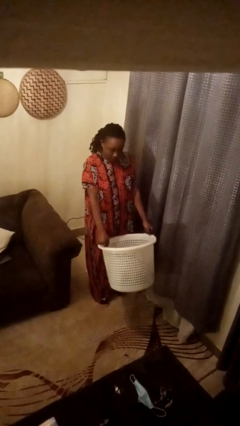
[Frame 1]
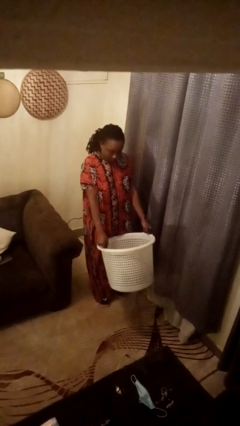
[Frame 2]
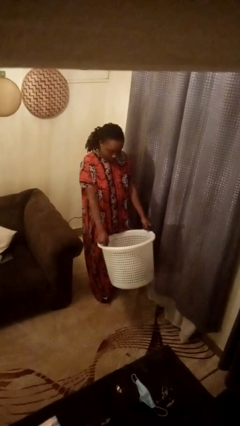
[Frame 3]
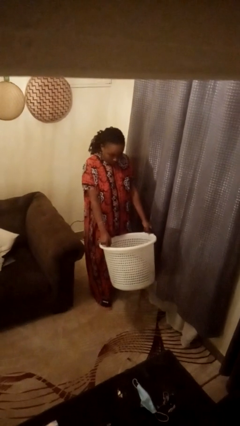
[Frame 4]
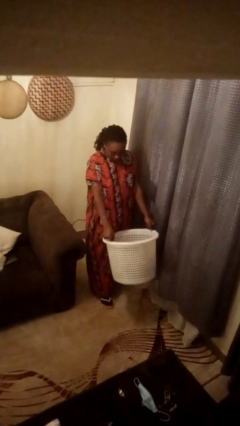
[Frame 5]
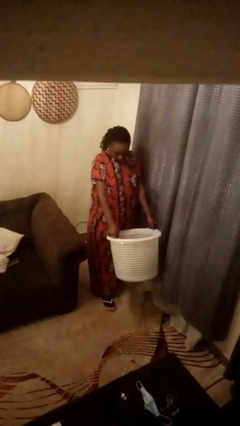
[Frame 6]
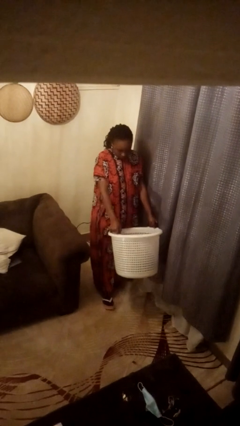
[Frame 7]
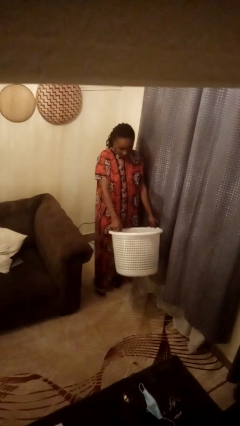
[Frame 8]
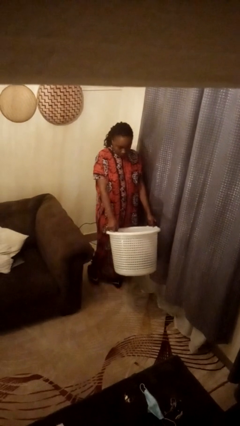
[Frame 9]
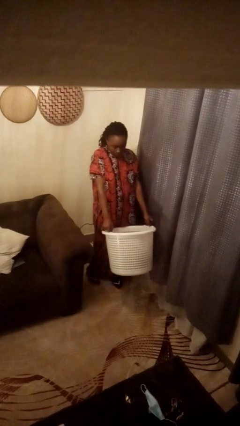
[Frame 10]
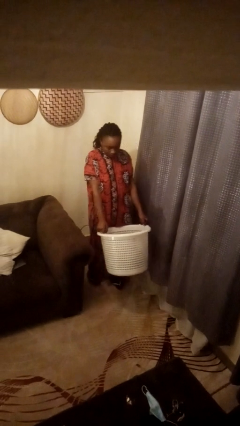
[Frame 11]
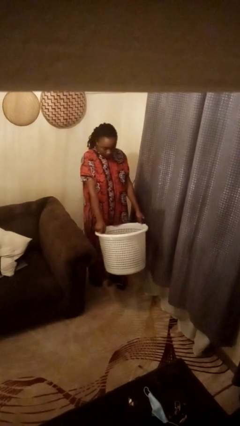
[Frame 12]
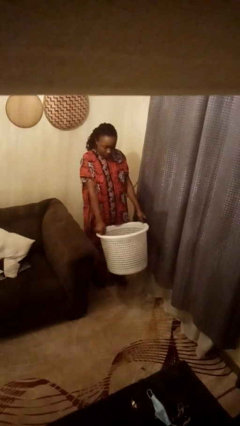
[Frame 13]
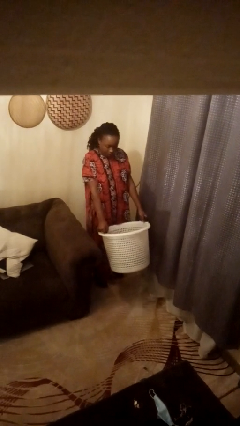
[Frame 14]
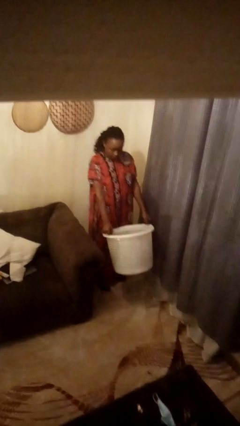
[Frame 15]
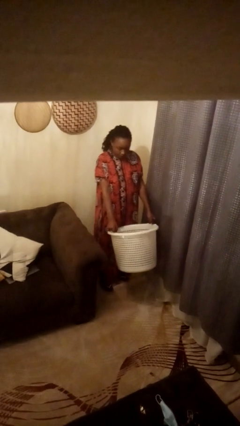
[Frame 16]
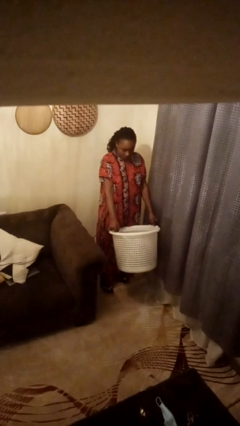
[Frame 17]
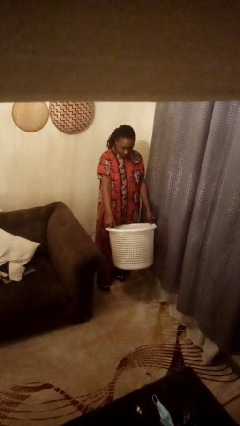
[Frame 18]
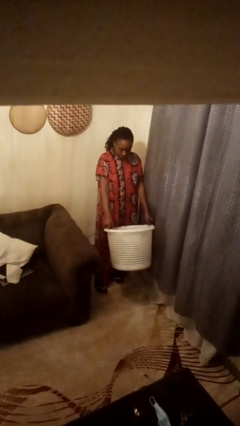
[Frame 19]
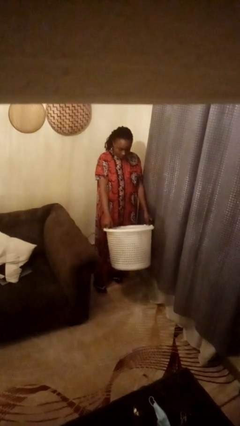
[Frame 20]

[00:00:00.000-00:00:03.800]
person carries laundry basket

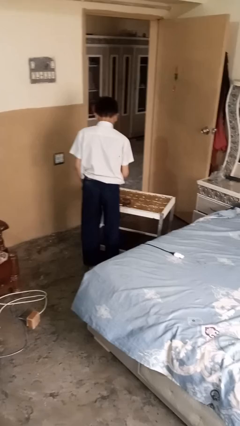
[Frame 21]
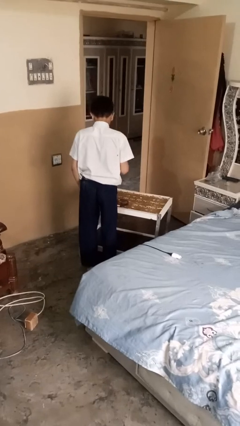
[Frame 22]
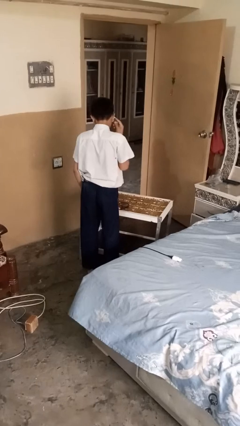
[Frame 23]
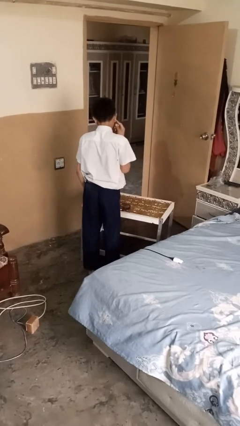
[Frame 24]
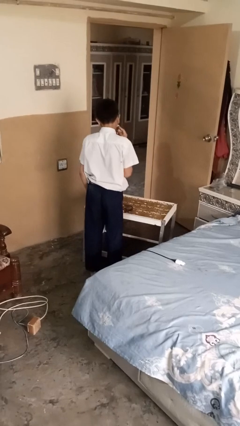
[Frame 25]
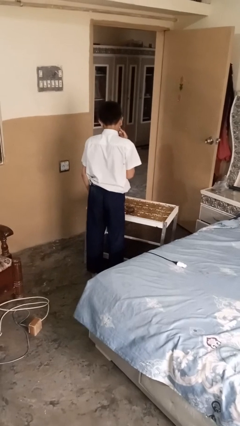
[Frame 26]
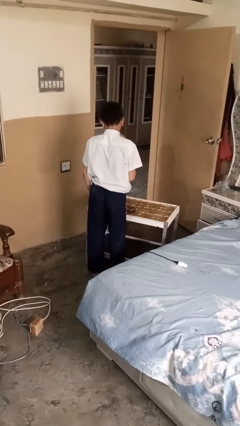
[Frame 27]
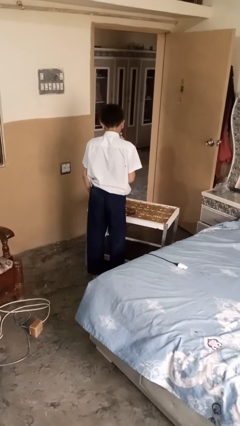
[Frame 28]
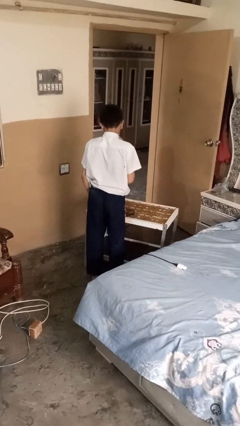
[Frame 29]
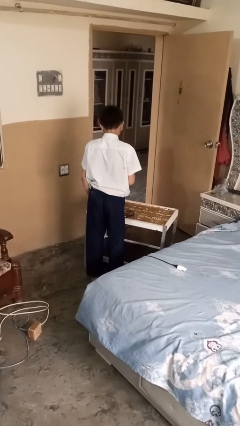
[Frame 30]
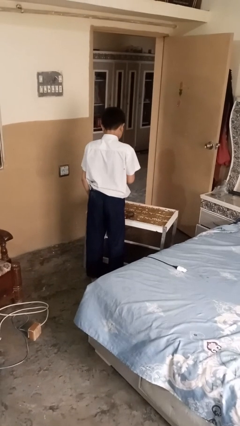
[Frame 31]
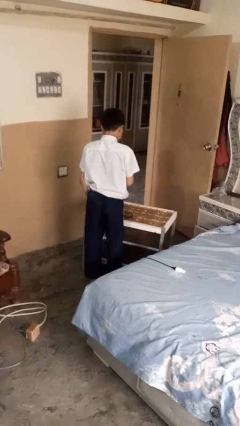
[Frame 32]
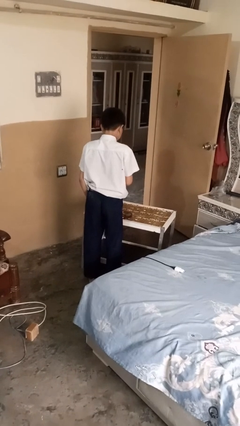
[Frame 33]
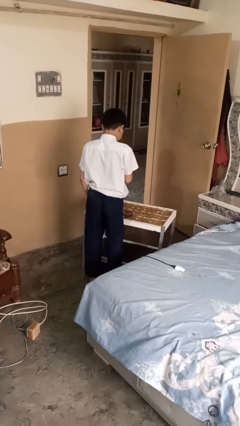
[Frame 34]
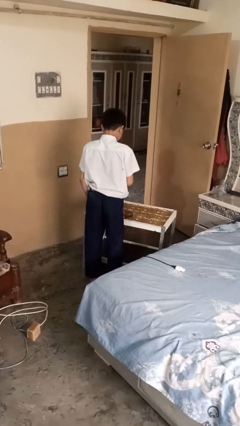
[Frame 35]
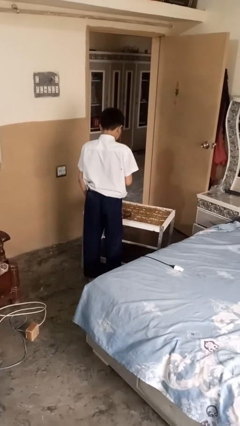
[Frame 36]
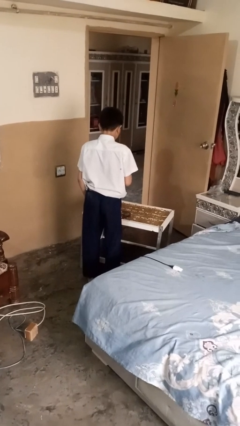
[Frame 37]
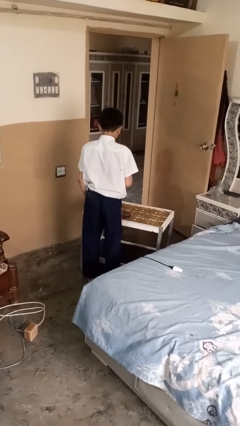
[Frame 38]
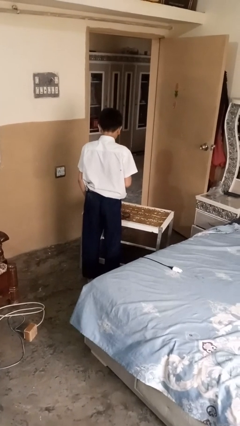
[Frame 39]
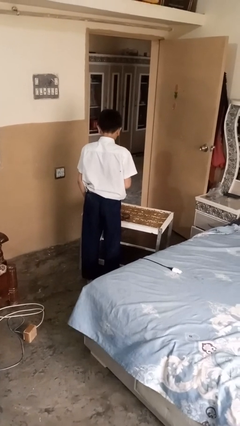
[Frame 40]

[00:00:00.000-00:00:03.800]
person shaves face

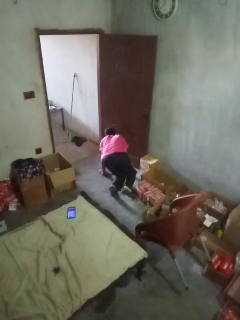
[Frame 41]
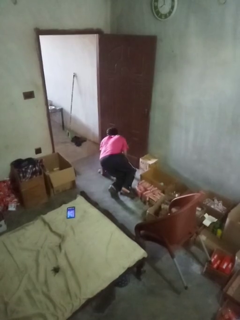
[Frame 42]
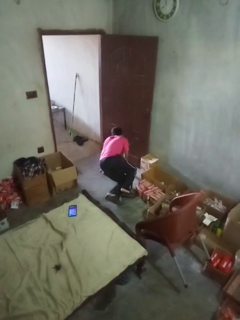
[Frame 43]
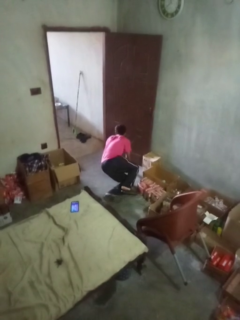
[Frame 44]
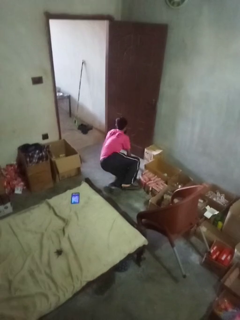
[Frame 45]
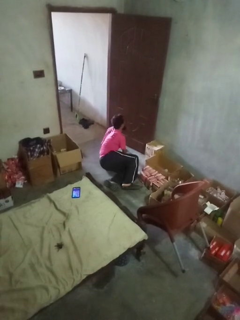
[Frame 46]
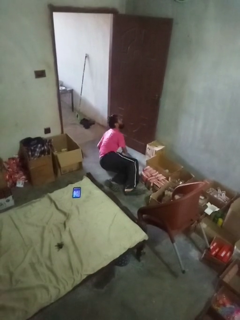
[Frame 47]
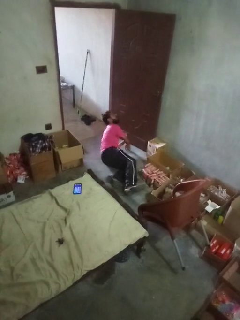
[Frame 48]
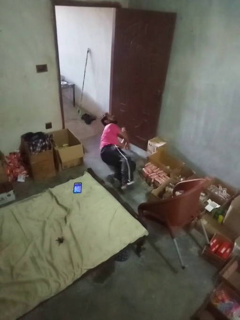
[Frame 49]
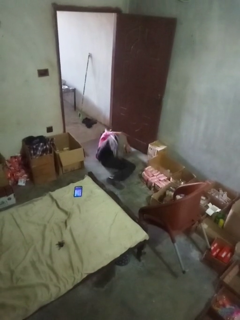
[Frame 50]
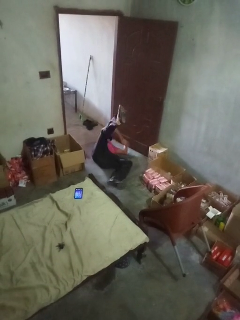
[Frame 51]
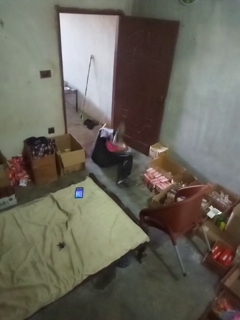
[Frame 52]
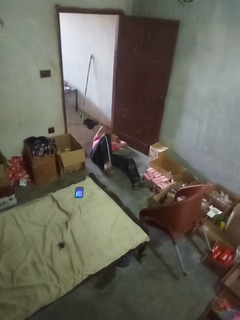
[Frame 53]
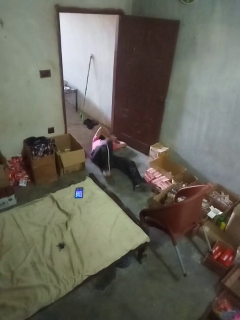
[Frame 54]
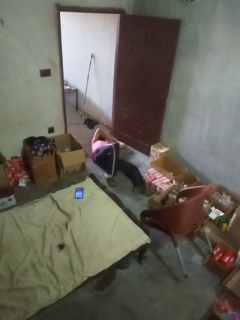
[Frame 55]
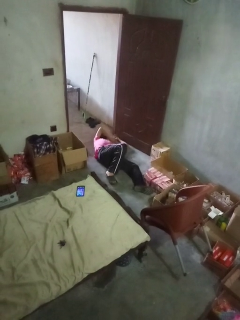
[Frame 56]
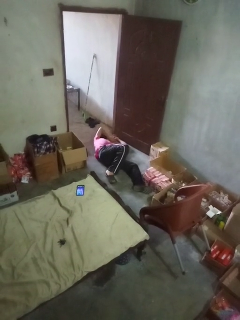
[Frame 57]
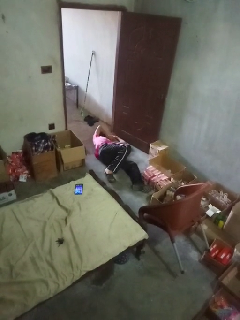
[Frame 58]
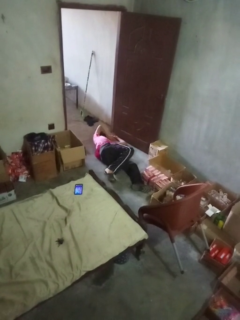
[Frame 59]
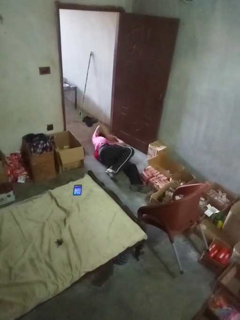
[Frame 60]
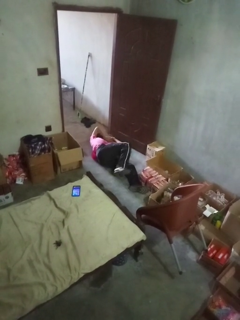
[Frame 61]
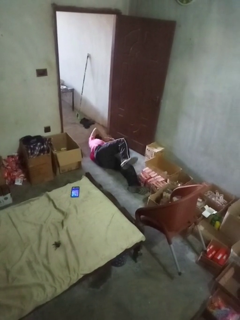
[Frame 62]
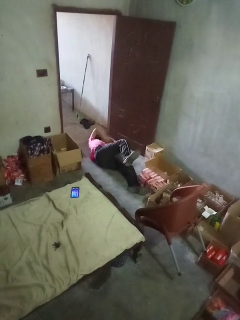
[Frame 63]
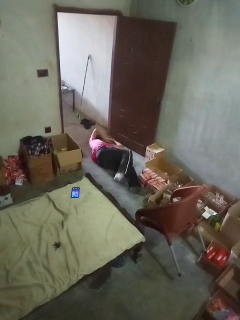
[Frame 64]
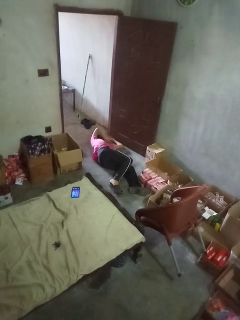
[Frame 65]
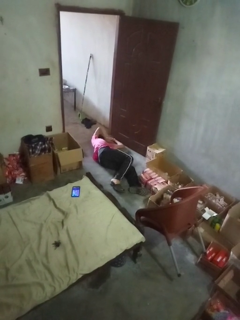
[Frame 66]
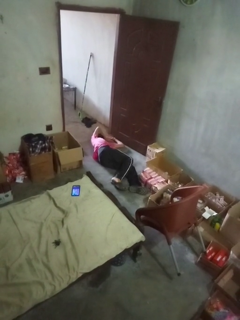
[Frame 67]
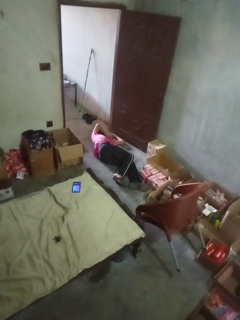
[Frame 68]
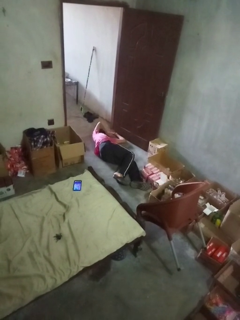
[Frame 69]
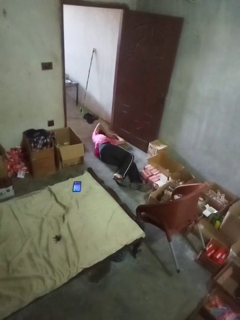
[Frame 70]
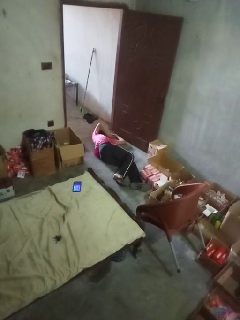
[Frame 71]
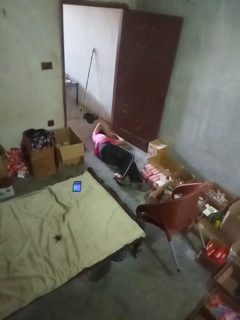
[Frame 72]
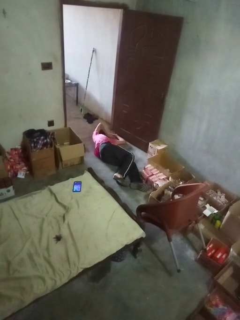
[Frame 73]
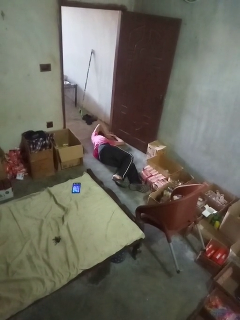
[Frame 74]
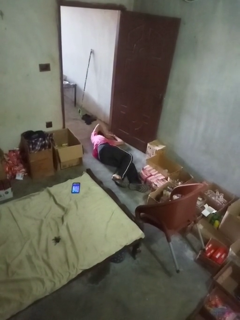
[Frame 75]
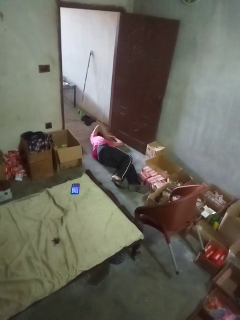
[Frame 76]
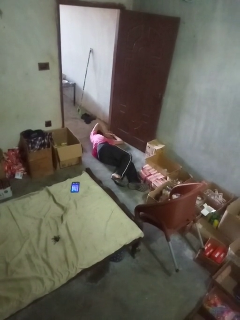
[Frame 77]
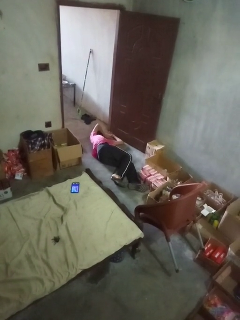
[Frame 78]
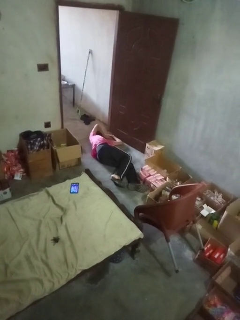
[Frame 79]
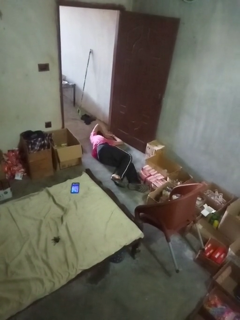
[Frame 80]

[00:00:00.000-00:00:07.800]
person lies down on floor

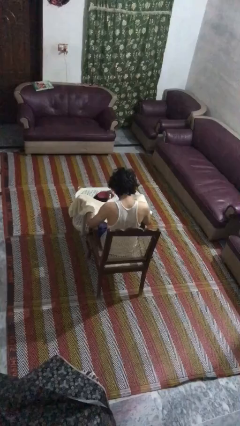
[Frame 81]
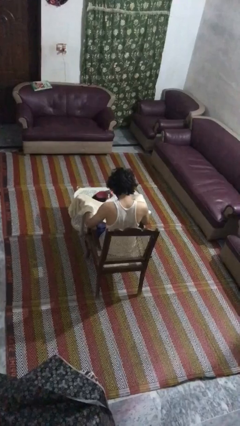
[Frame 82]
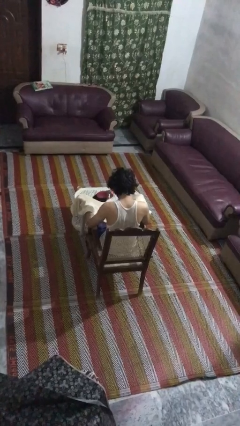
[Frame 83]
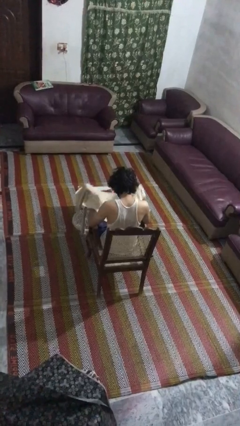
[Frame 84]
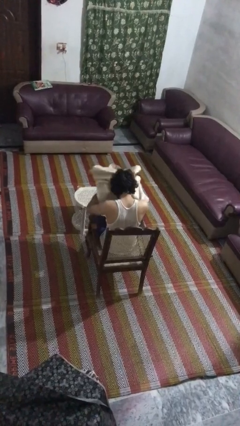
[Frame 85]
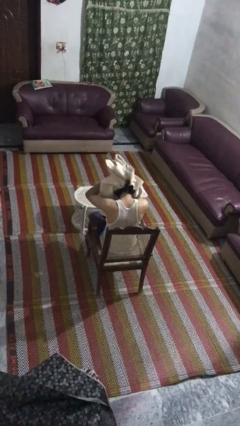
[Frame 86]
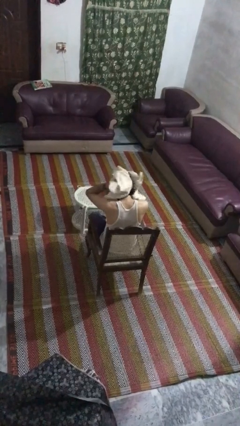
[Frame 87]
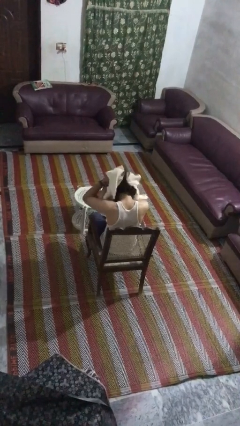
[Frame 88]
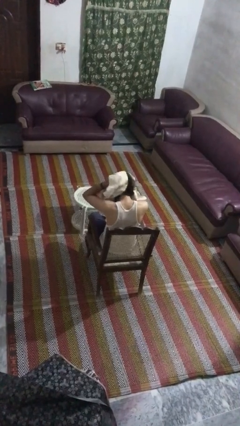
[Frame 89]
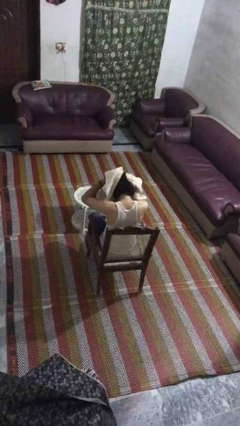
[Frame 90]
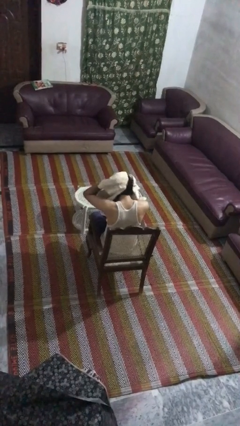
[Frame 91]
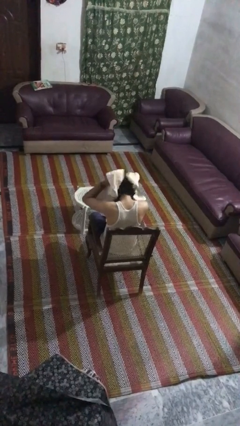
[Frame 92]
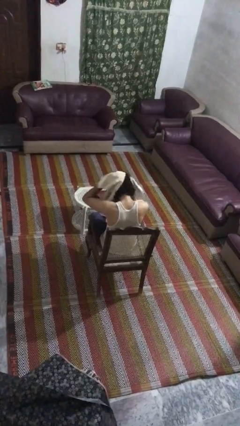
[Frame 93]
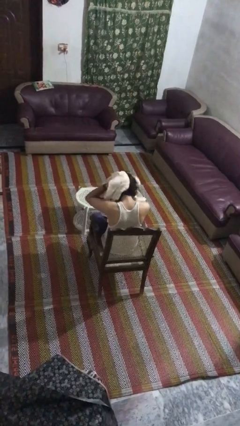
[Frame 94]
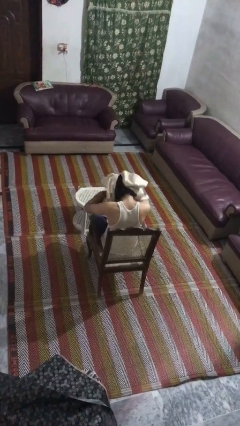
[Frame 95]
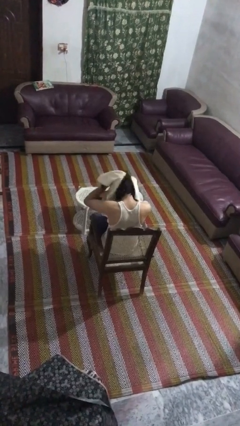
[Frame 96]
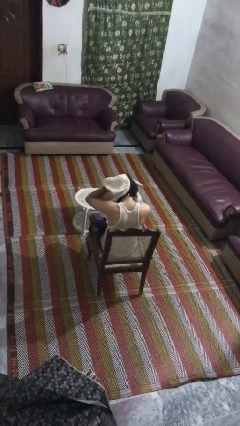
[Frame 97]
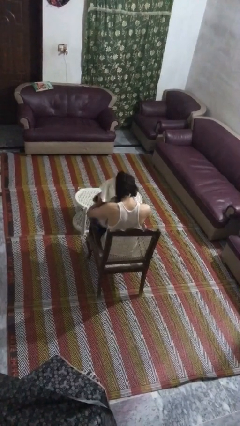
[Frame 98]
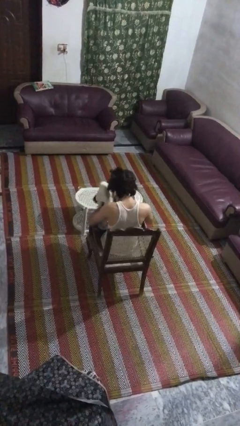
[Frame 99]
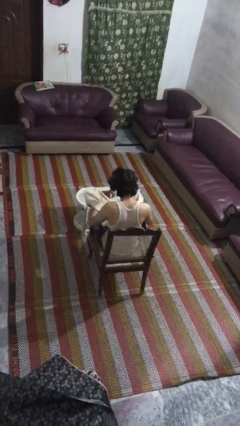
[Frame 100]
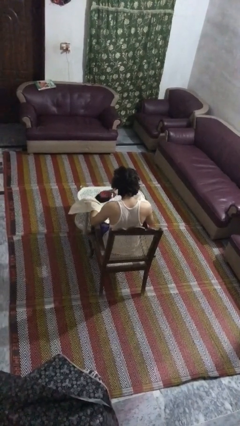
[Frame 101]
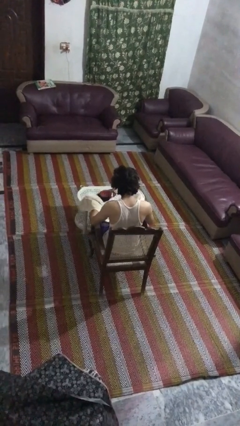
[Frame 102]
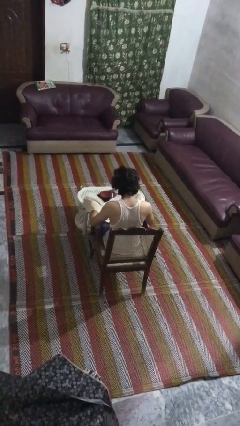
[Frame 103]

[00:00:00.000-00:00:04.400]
person dries hair with towel

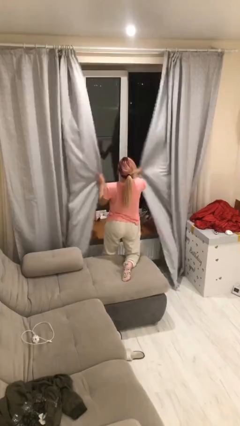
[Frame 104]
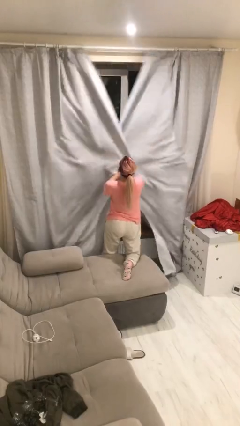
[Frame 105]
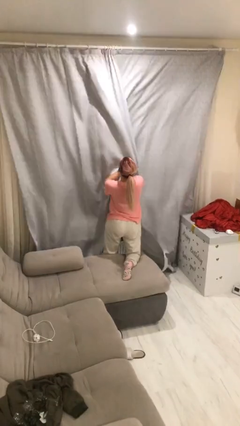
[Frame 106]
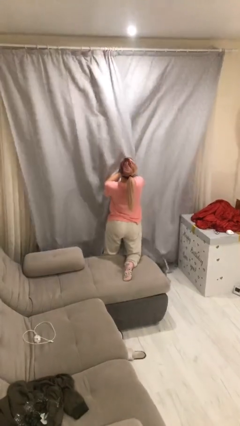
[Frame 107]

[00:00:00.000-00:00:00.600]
person closes curtains
